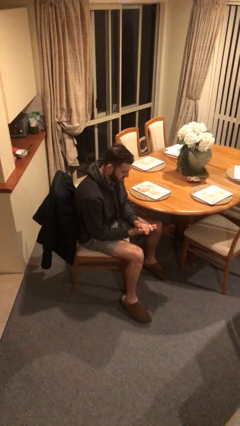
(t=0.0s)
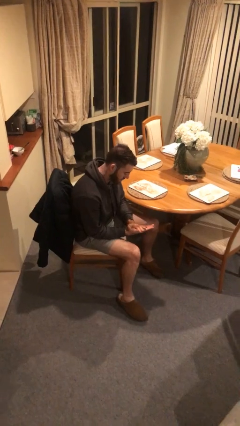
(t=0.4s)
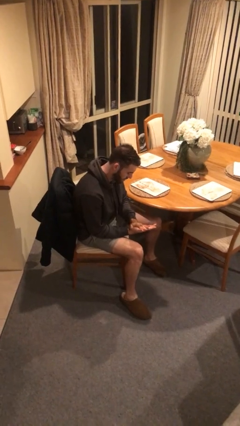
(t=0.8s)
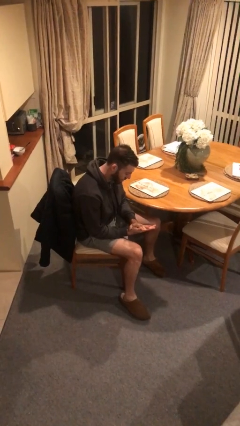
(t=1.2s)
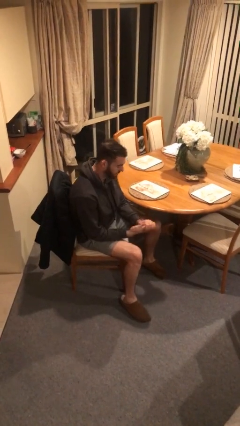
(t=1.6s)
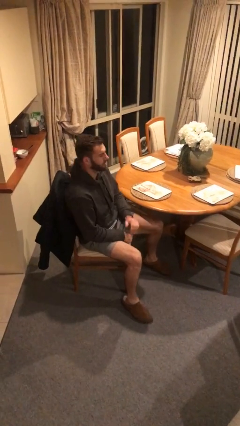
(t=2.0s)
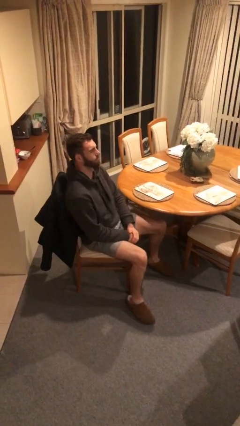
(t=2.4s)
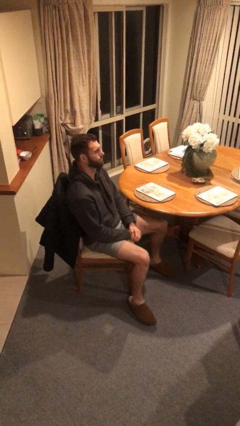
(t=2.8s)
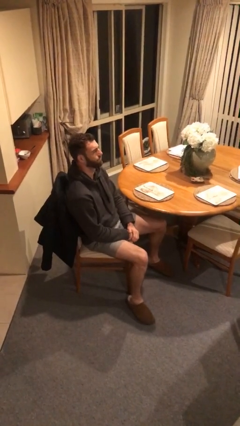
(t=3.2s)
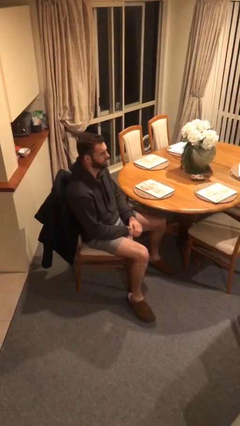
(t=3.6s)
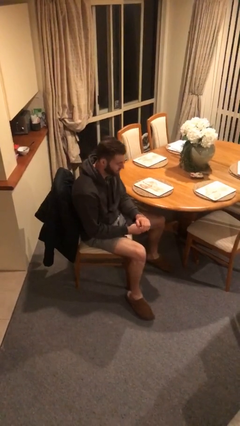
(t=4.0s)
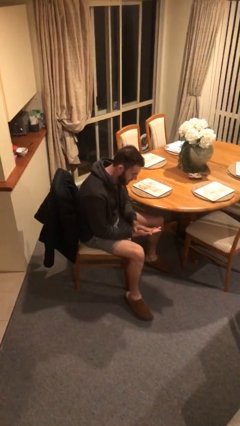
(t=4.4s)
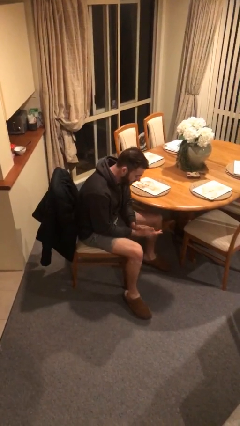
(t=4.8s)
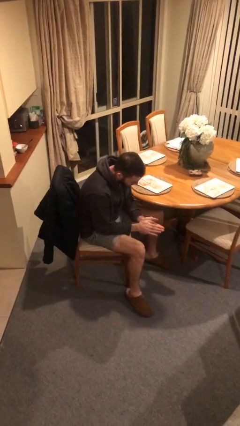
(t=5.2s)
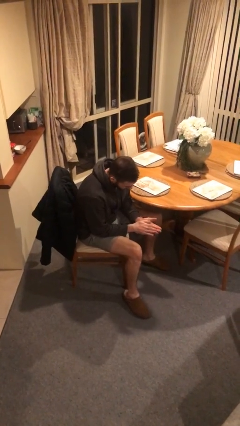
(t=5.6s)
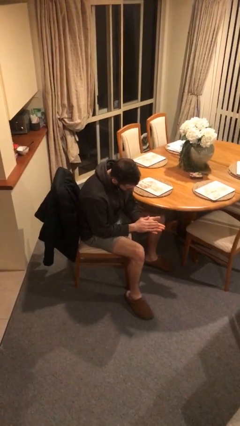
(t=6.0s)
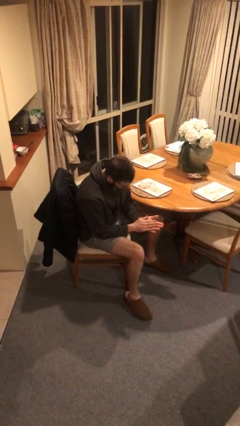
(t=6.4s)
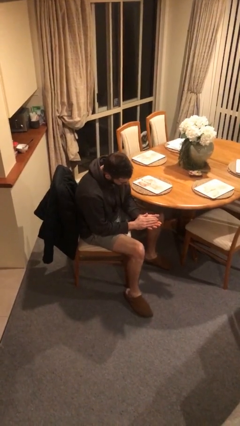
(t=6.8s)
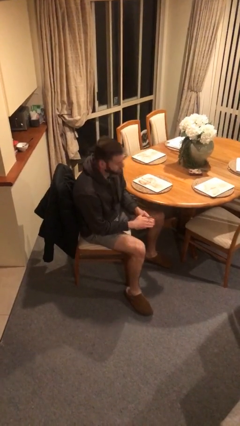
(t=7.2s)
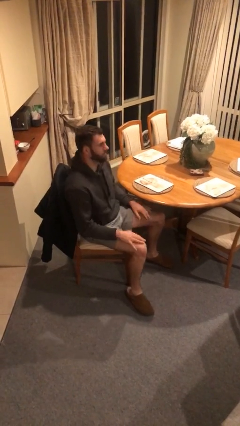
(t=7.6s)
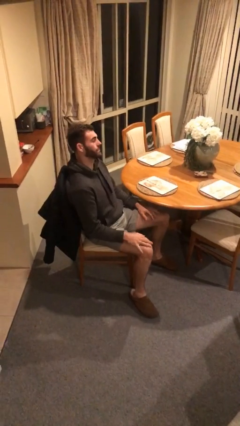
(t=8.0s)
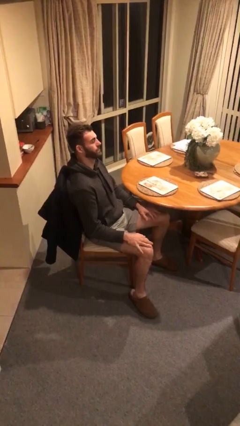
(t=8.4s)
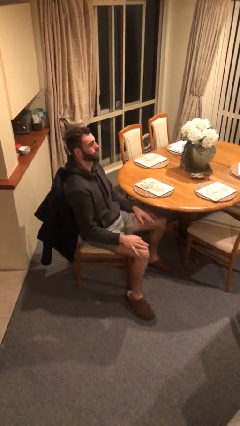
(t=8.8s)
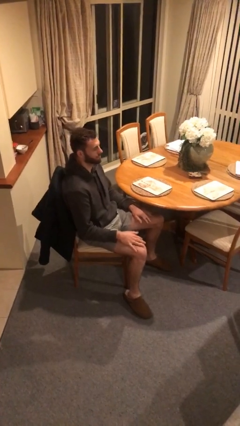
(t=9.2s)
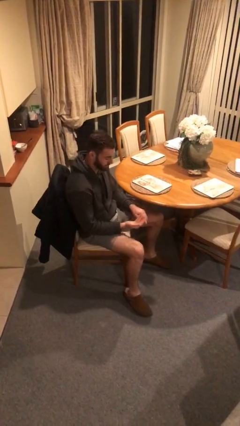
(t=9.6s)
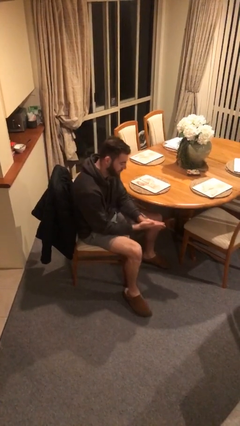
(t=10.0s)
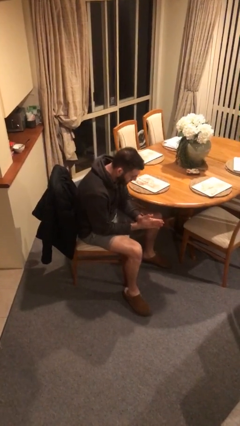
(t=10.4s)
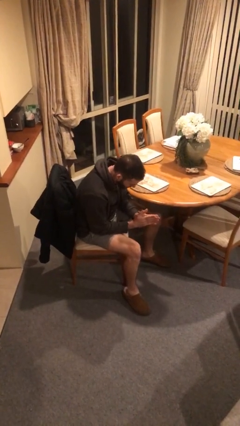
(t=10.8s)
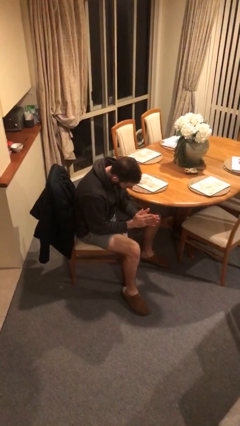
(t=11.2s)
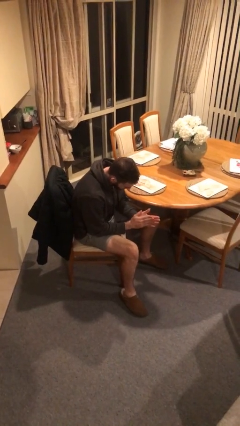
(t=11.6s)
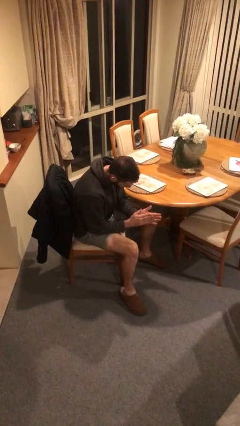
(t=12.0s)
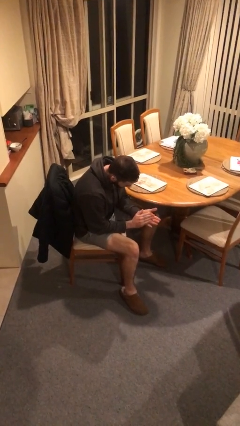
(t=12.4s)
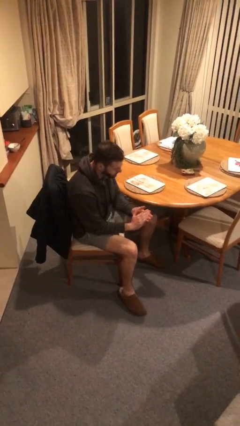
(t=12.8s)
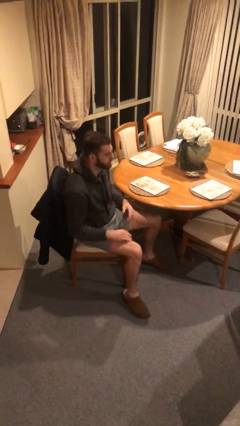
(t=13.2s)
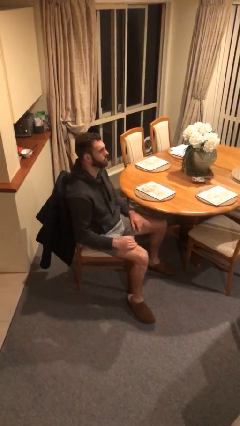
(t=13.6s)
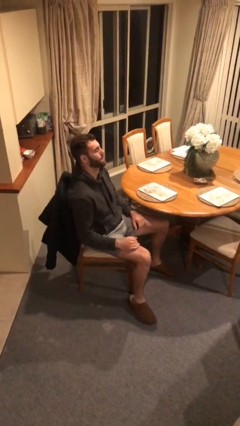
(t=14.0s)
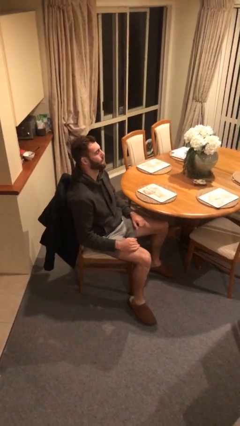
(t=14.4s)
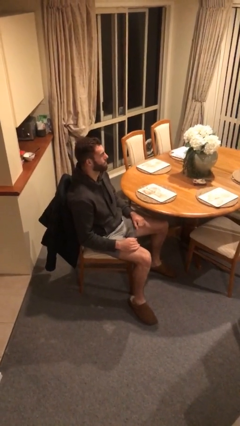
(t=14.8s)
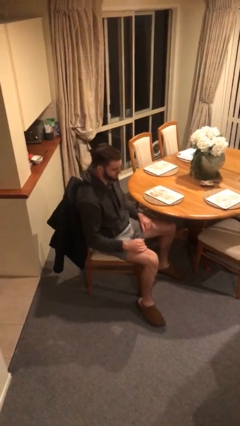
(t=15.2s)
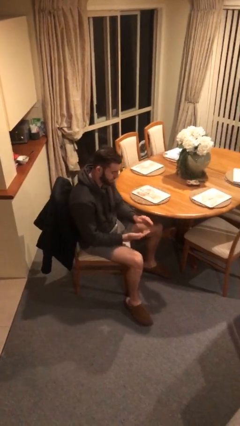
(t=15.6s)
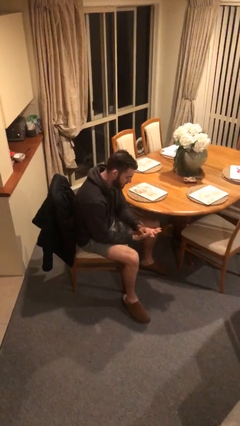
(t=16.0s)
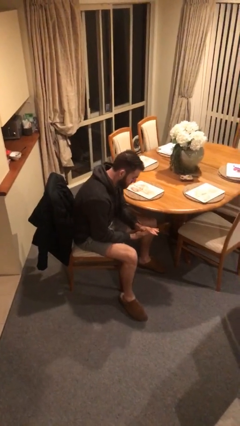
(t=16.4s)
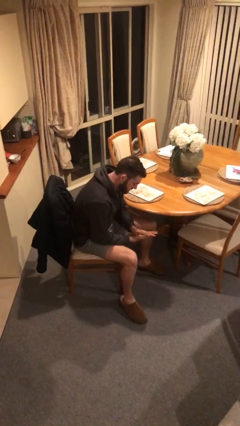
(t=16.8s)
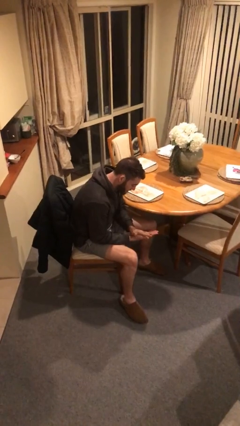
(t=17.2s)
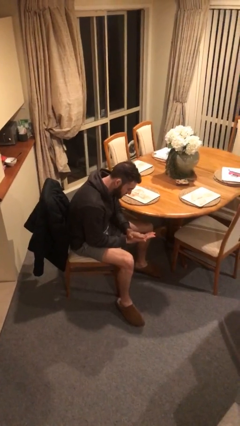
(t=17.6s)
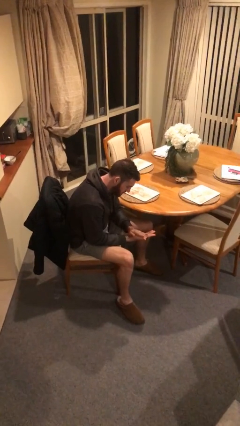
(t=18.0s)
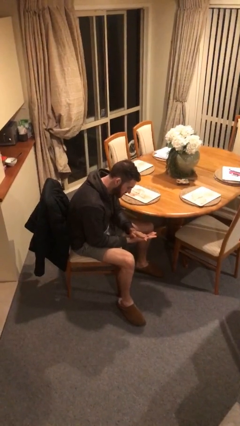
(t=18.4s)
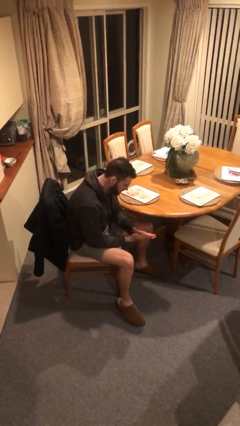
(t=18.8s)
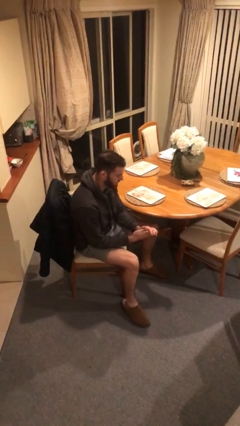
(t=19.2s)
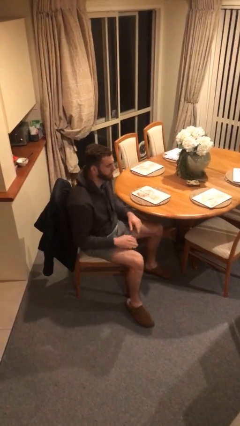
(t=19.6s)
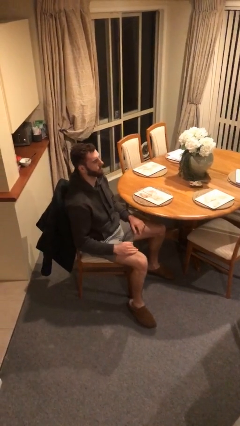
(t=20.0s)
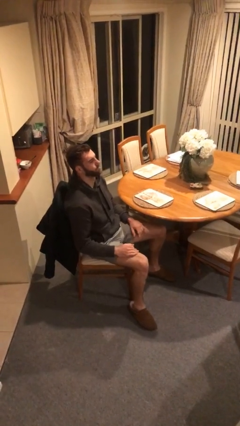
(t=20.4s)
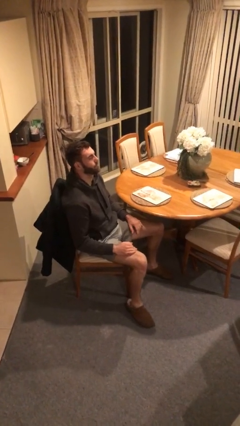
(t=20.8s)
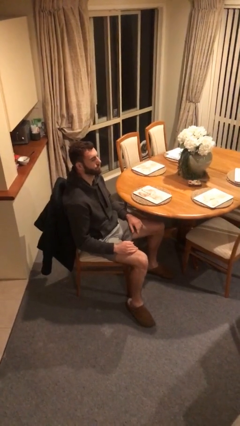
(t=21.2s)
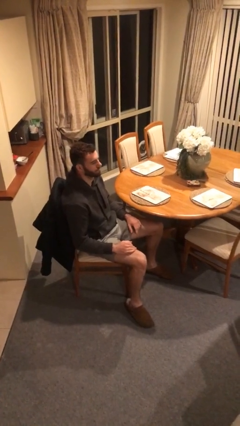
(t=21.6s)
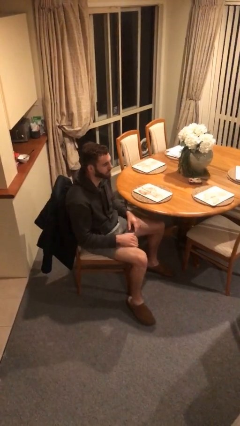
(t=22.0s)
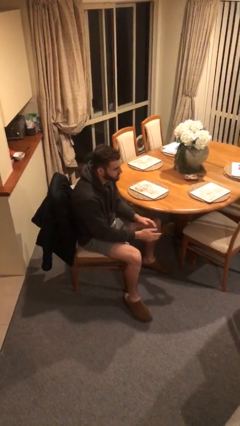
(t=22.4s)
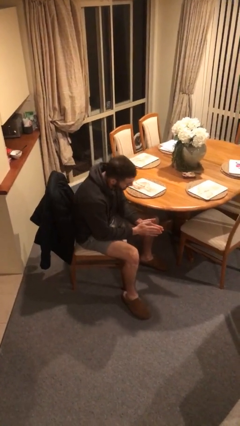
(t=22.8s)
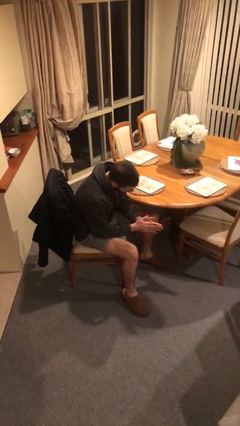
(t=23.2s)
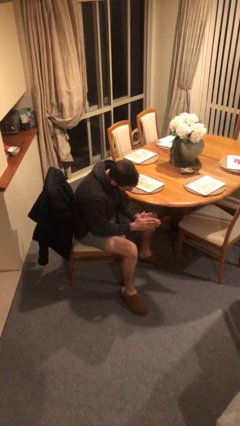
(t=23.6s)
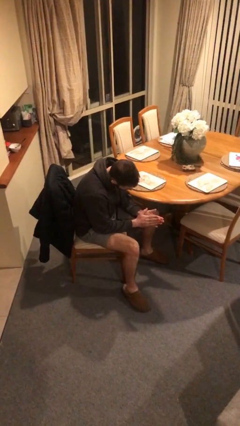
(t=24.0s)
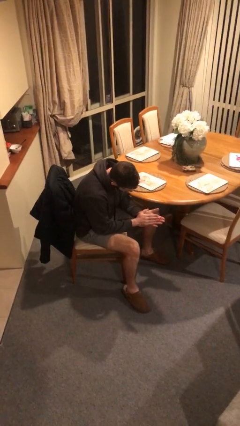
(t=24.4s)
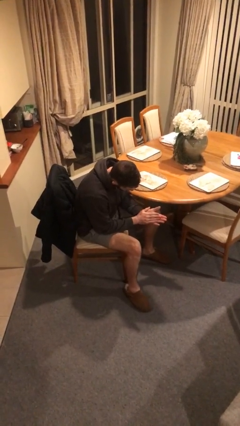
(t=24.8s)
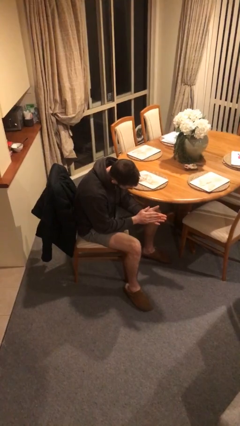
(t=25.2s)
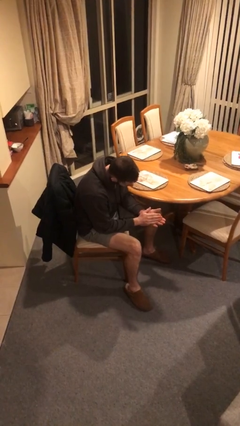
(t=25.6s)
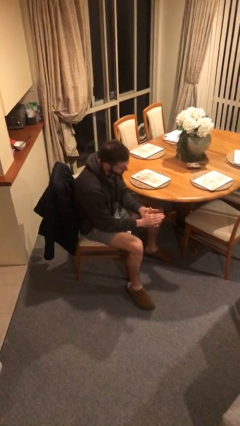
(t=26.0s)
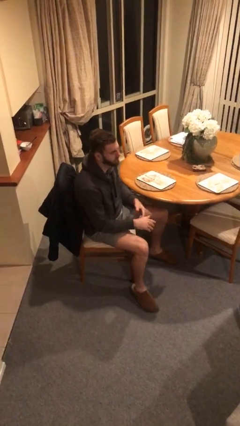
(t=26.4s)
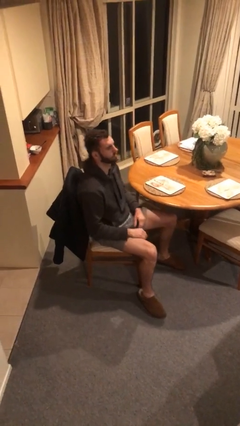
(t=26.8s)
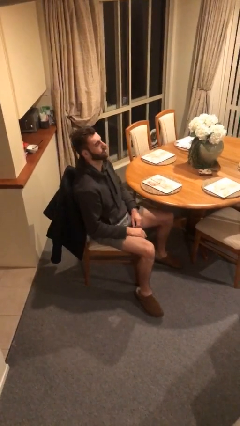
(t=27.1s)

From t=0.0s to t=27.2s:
person looks at hands in lap

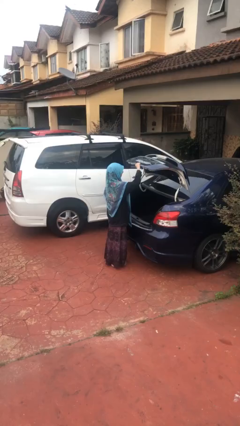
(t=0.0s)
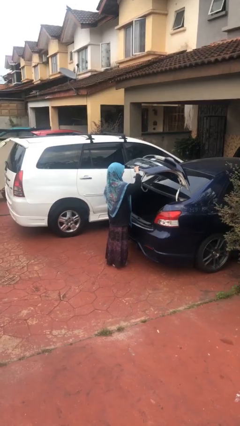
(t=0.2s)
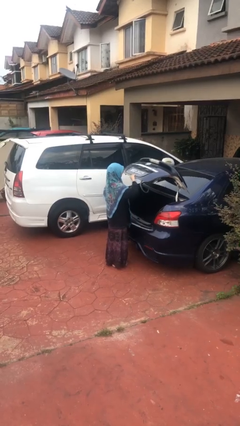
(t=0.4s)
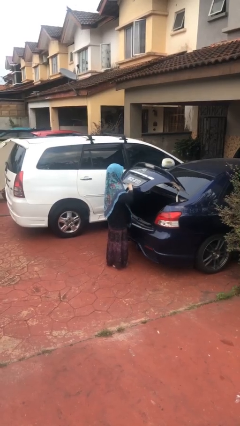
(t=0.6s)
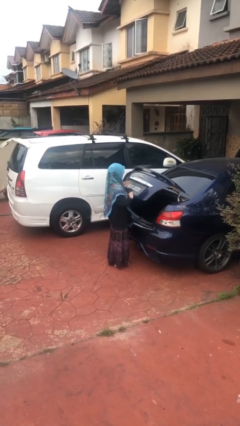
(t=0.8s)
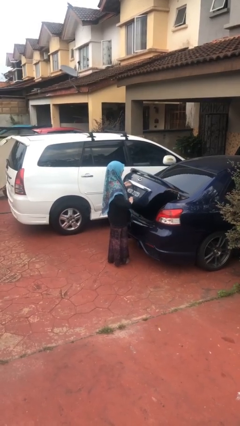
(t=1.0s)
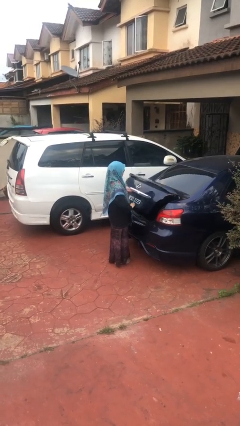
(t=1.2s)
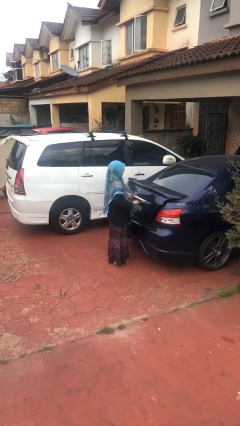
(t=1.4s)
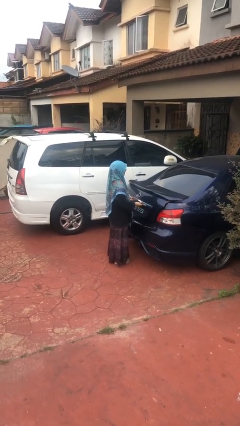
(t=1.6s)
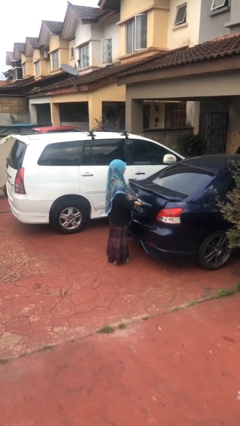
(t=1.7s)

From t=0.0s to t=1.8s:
person closes car trunk

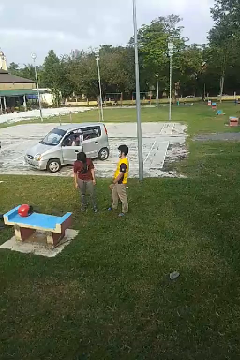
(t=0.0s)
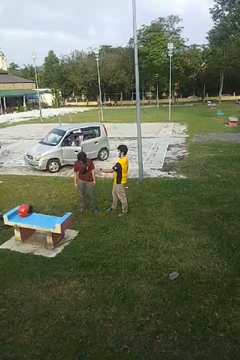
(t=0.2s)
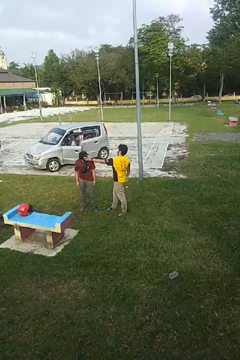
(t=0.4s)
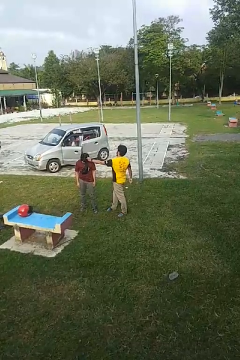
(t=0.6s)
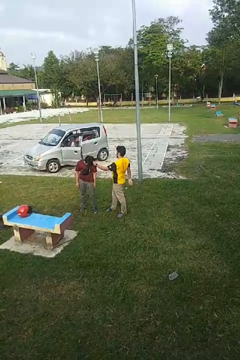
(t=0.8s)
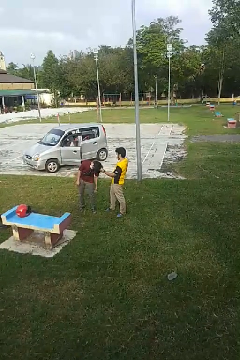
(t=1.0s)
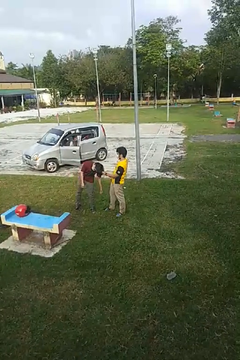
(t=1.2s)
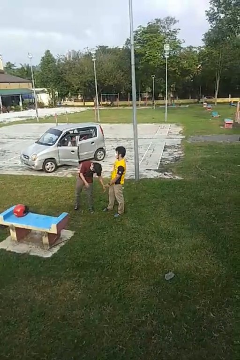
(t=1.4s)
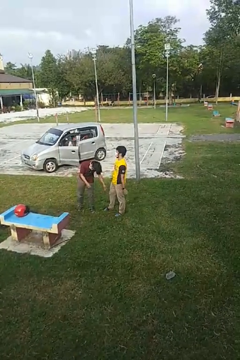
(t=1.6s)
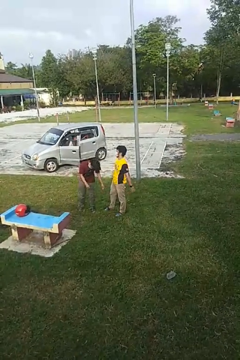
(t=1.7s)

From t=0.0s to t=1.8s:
person grabs person by hair

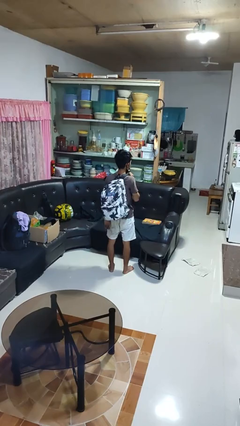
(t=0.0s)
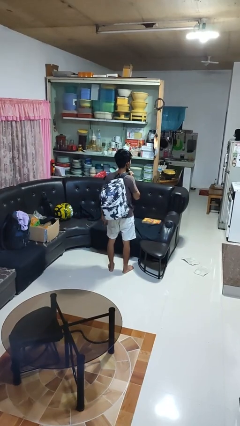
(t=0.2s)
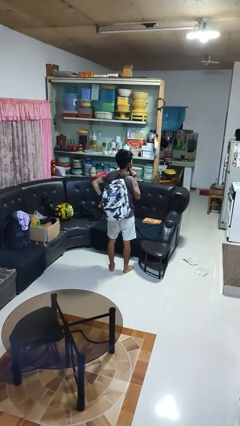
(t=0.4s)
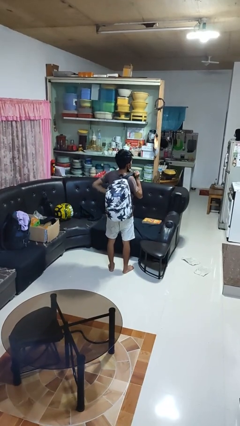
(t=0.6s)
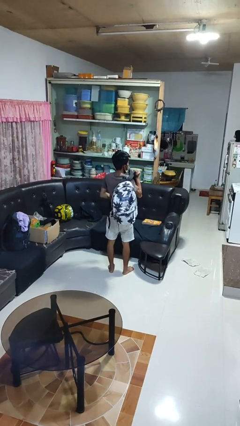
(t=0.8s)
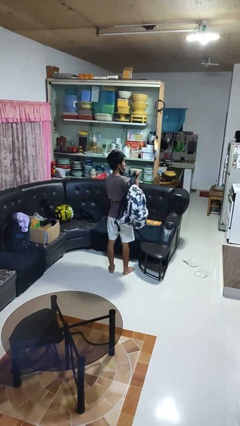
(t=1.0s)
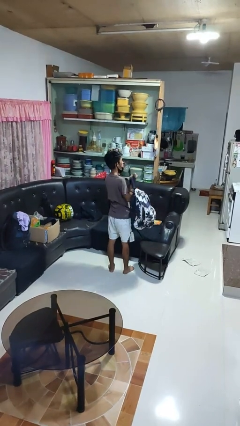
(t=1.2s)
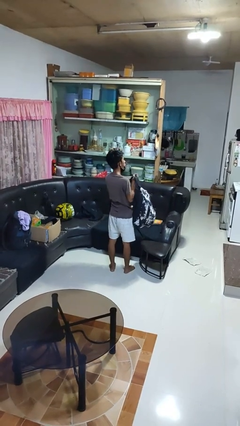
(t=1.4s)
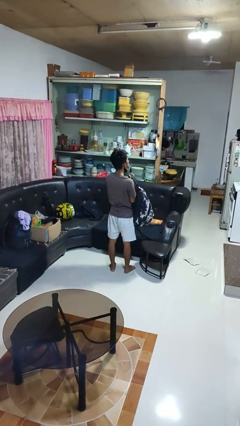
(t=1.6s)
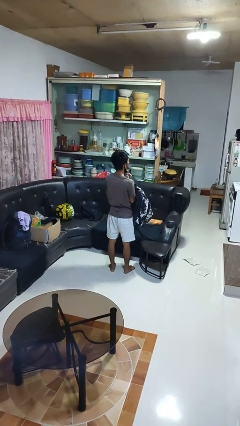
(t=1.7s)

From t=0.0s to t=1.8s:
person takes off backpack
